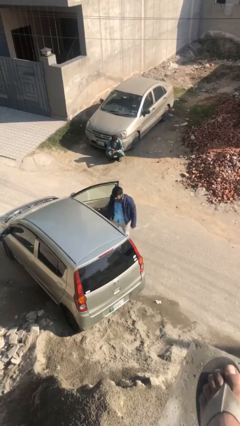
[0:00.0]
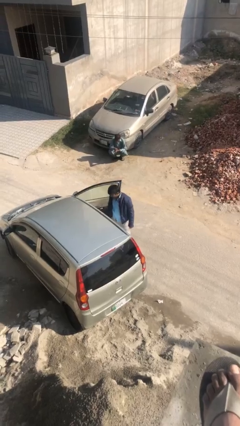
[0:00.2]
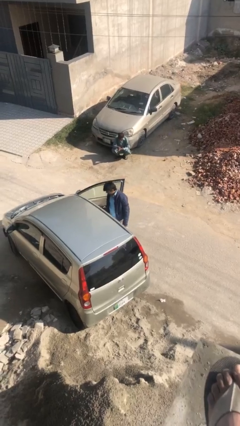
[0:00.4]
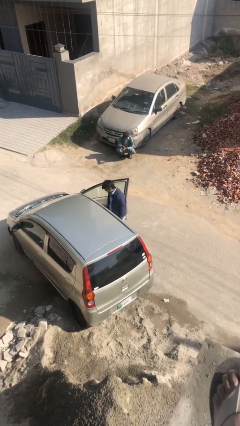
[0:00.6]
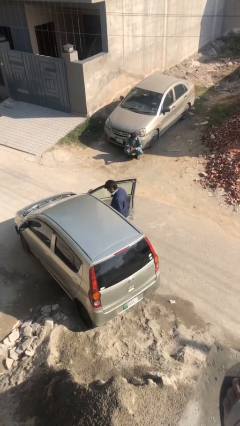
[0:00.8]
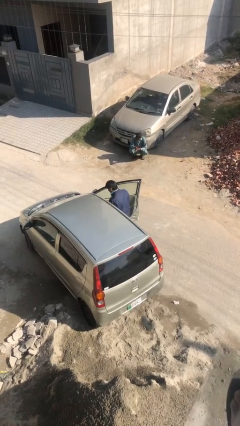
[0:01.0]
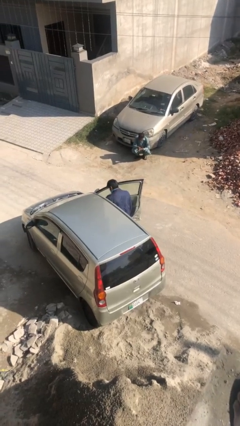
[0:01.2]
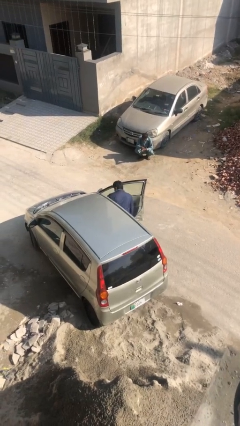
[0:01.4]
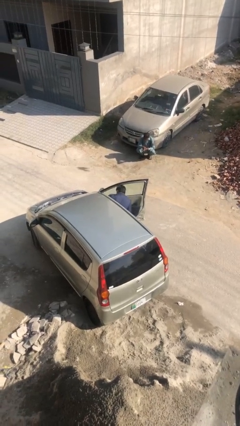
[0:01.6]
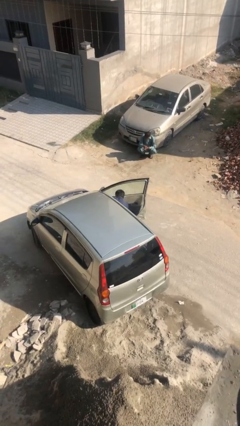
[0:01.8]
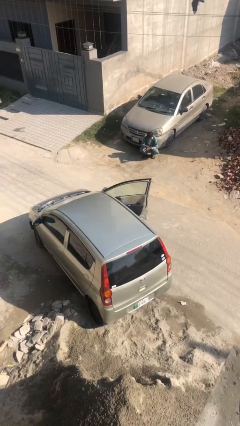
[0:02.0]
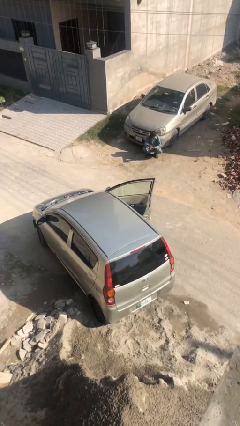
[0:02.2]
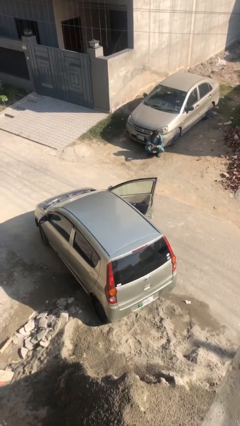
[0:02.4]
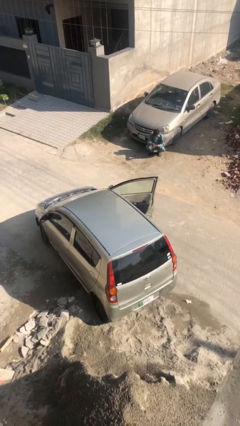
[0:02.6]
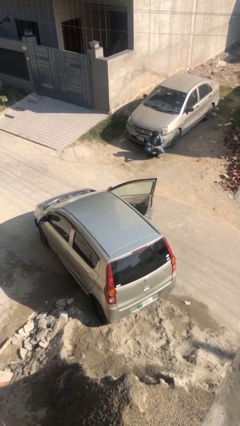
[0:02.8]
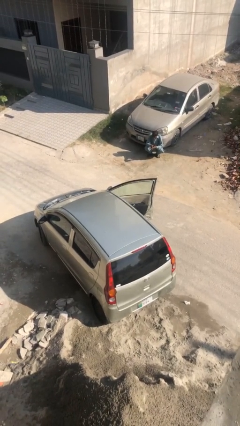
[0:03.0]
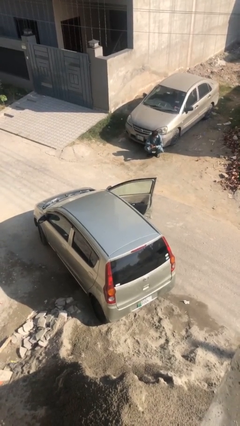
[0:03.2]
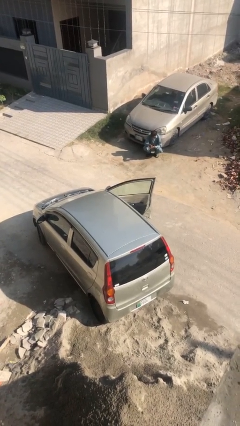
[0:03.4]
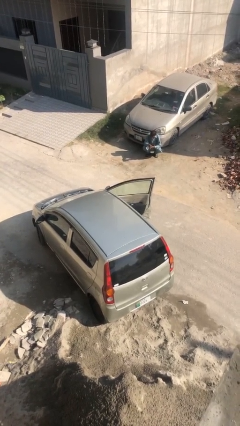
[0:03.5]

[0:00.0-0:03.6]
person enters car

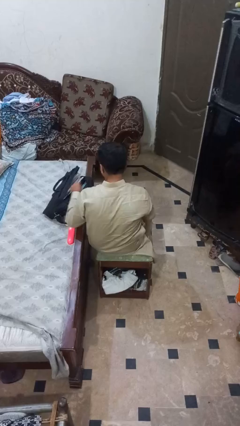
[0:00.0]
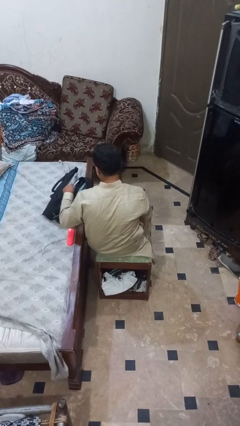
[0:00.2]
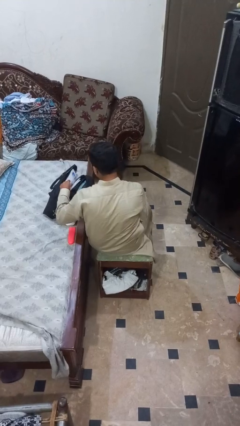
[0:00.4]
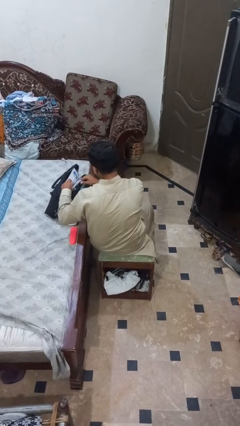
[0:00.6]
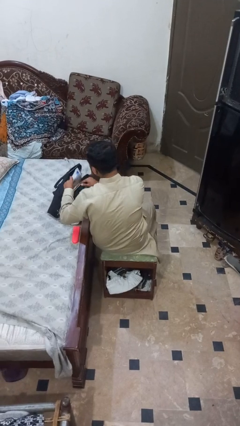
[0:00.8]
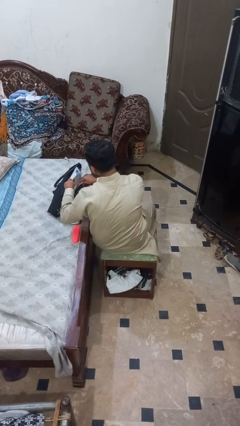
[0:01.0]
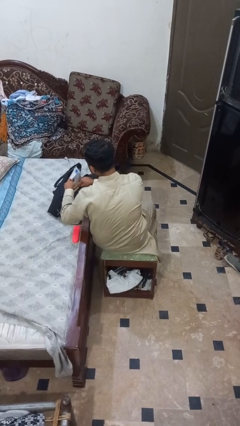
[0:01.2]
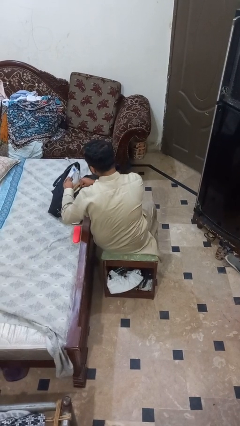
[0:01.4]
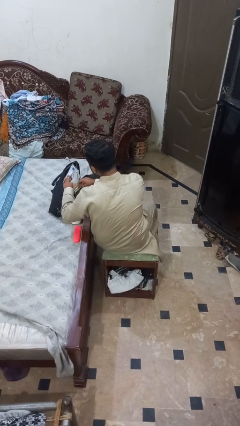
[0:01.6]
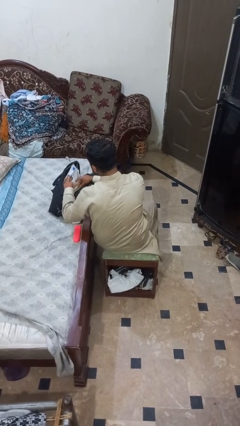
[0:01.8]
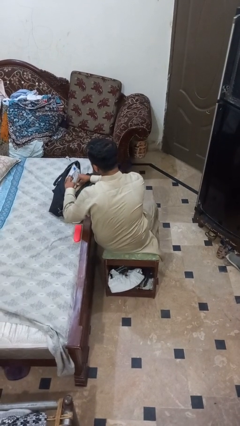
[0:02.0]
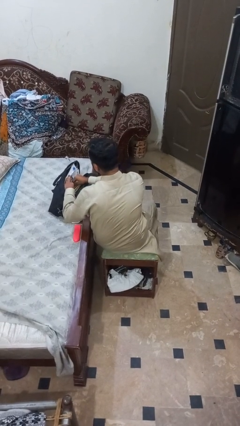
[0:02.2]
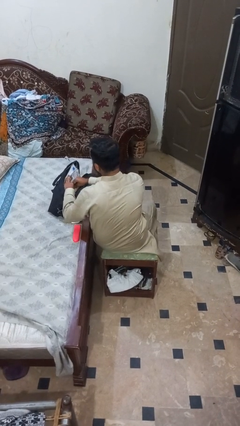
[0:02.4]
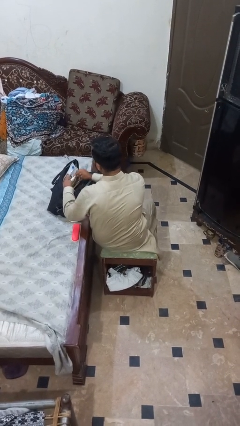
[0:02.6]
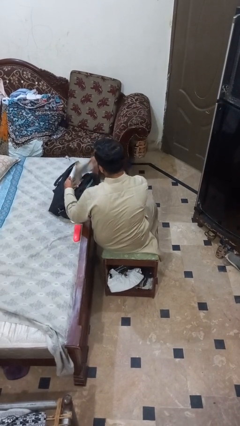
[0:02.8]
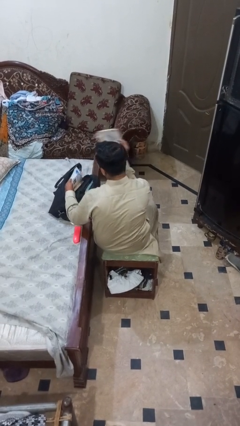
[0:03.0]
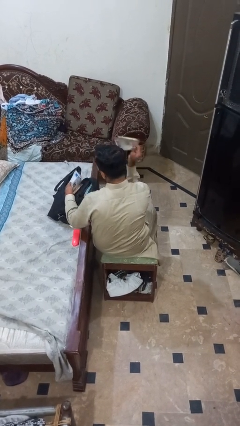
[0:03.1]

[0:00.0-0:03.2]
person searches in bag

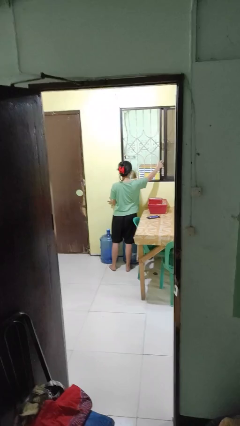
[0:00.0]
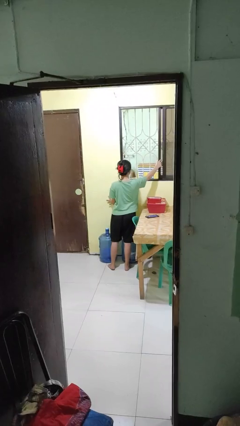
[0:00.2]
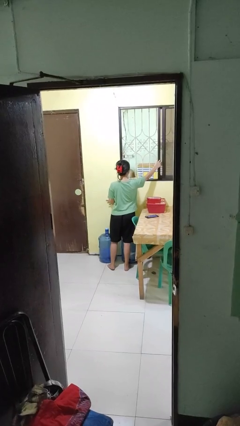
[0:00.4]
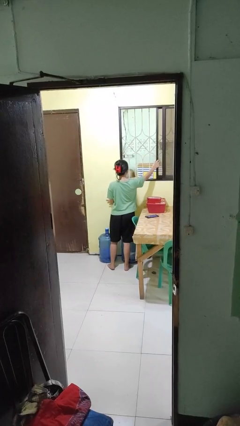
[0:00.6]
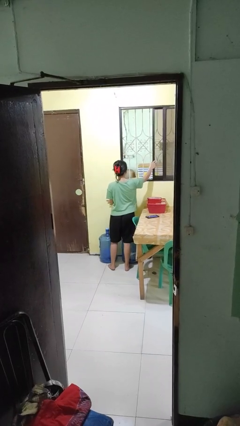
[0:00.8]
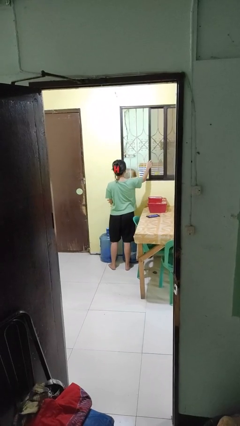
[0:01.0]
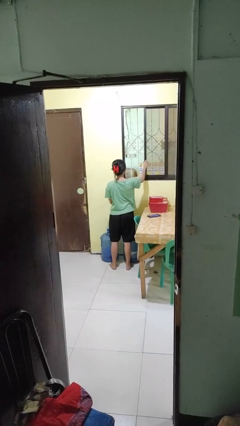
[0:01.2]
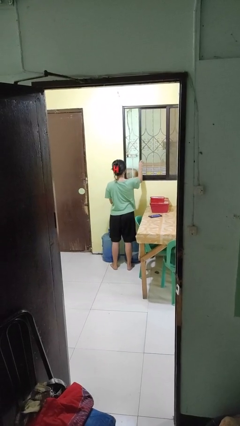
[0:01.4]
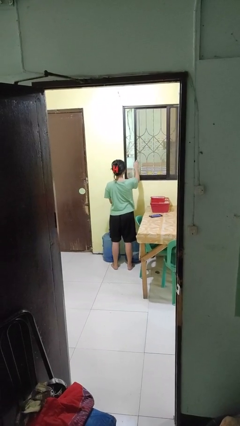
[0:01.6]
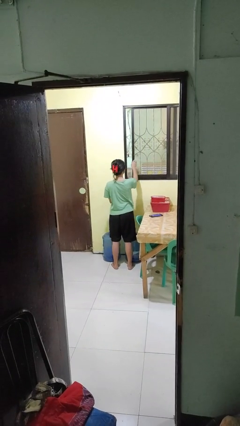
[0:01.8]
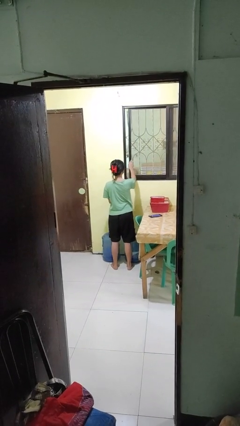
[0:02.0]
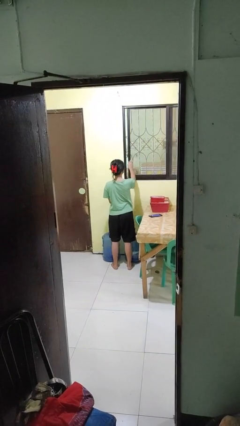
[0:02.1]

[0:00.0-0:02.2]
person closes home window

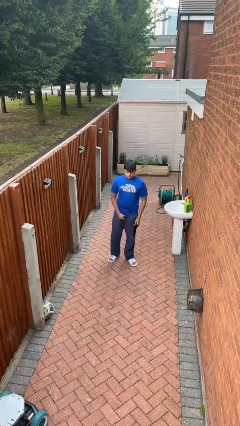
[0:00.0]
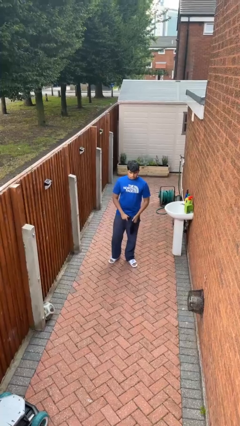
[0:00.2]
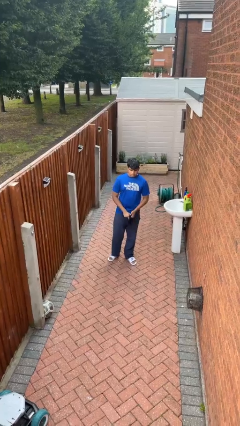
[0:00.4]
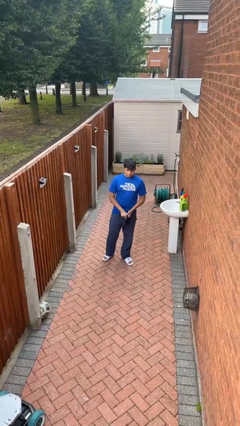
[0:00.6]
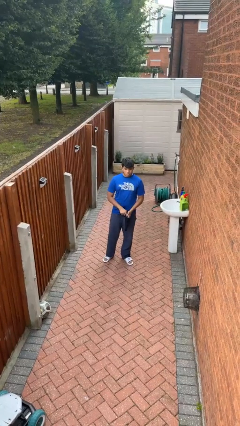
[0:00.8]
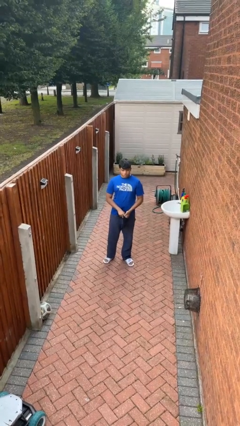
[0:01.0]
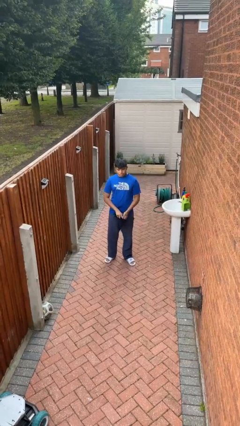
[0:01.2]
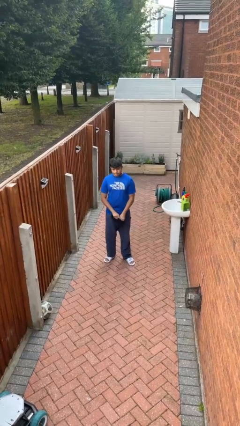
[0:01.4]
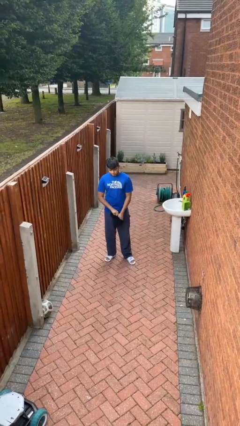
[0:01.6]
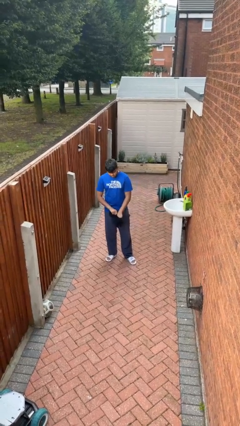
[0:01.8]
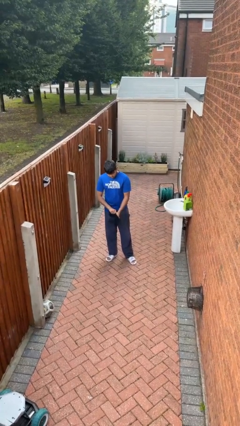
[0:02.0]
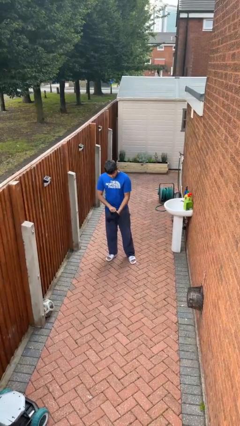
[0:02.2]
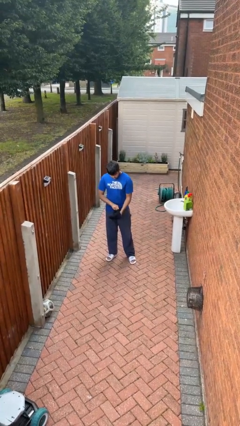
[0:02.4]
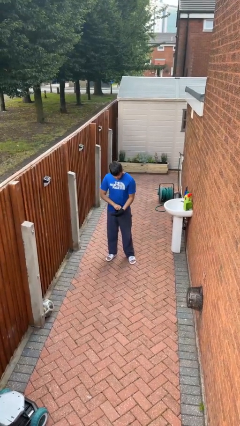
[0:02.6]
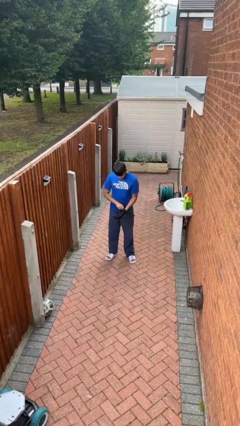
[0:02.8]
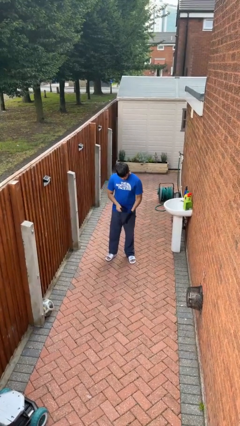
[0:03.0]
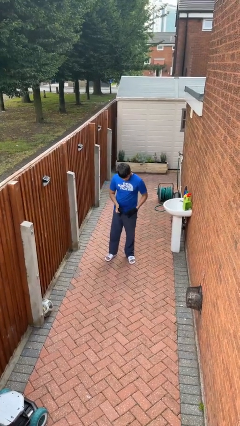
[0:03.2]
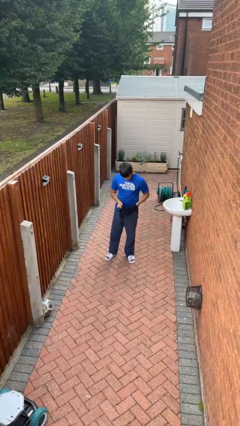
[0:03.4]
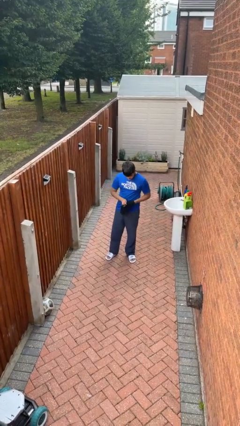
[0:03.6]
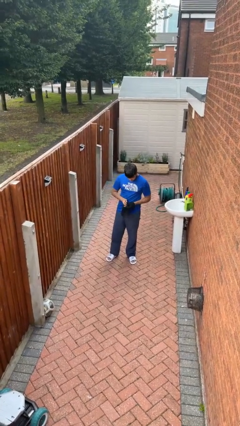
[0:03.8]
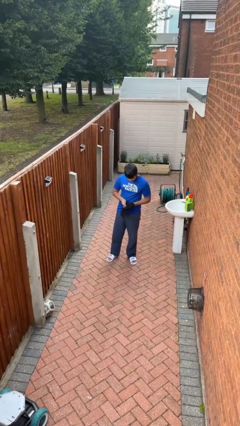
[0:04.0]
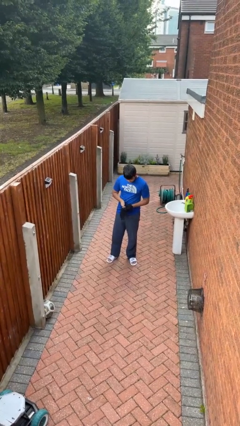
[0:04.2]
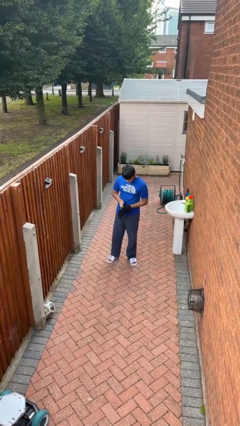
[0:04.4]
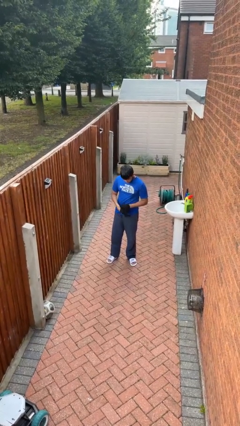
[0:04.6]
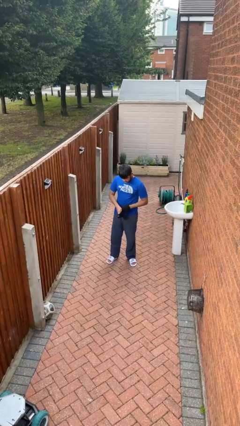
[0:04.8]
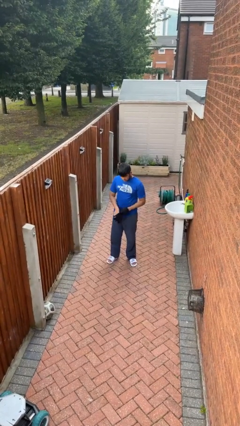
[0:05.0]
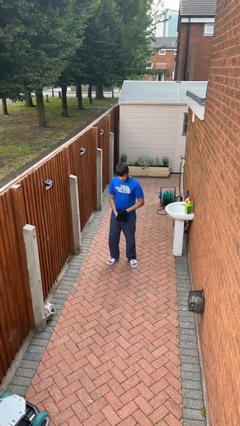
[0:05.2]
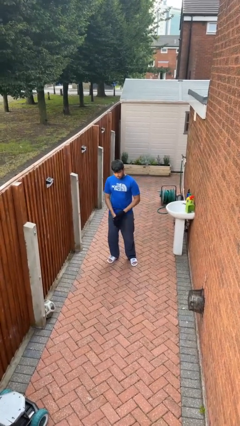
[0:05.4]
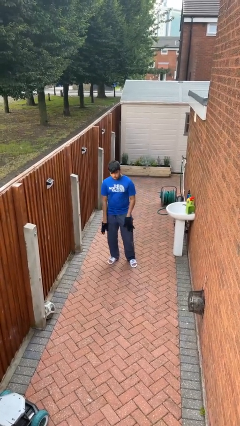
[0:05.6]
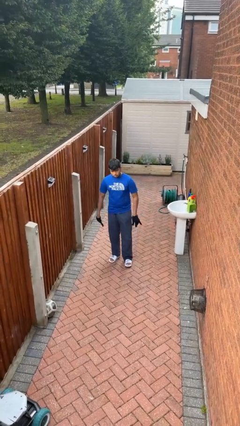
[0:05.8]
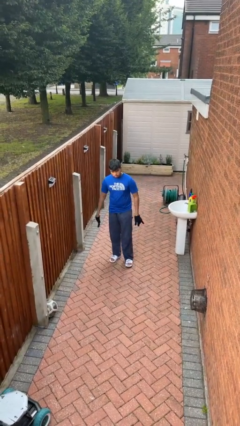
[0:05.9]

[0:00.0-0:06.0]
person puts on gloves

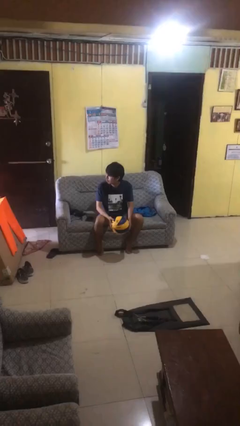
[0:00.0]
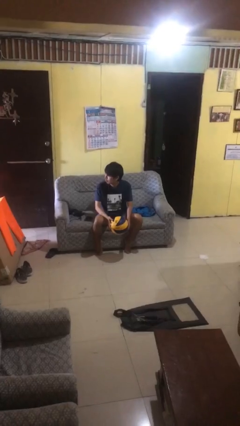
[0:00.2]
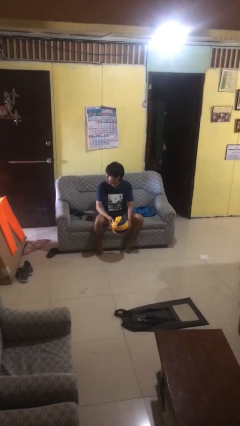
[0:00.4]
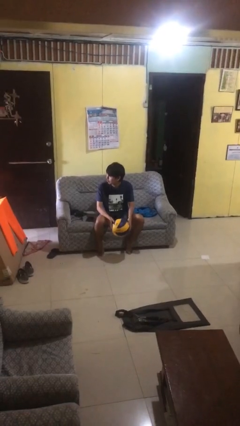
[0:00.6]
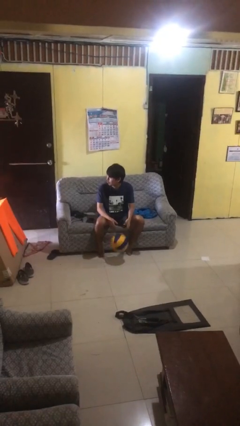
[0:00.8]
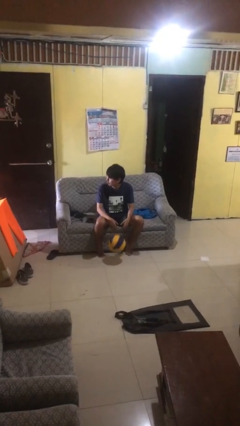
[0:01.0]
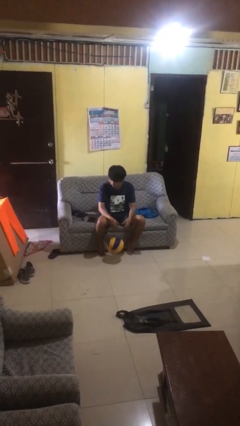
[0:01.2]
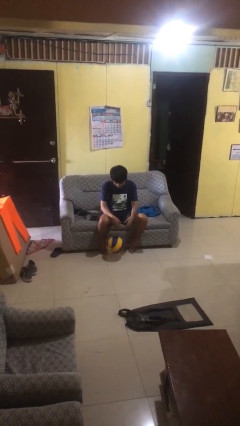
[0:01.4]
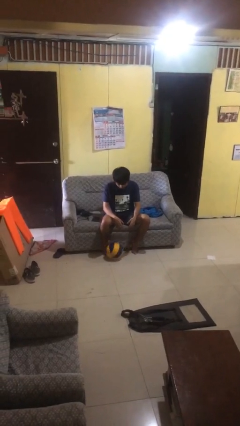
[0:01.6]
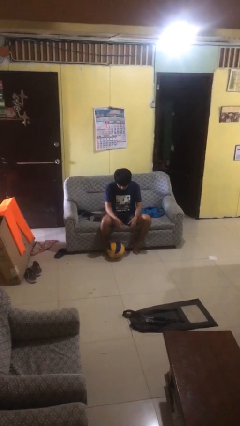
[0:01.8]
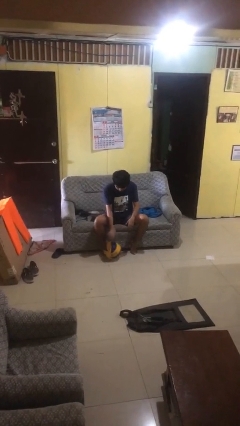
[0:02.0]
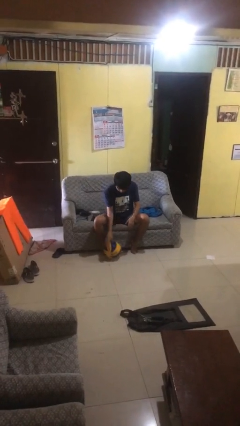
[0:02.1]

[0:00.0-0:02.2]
person drops object

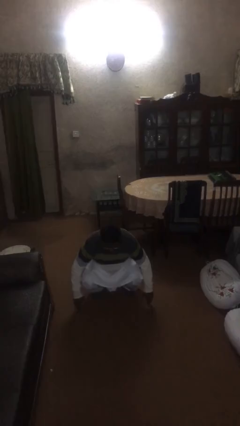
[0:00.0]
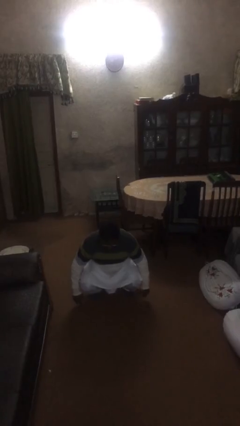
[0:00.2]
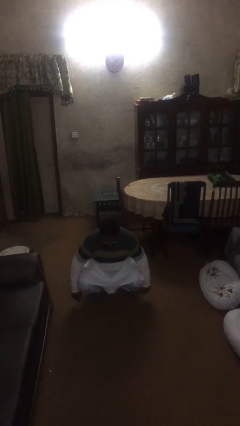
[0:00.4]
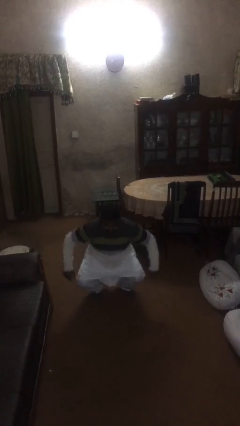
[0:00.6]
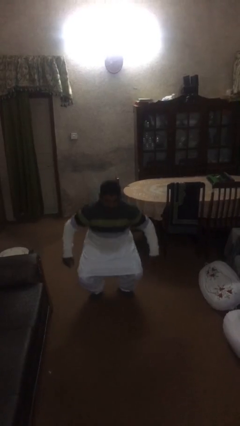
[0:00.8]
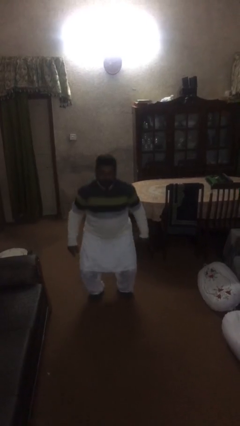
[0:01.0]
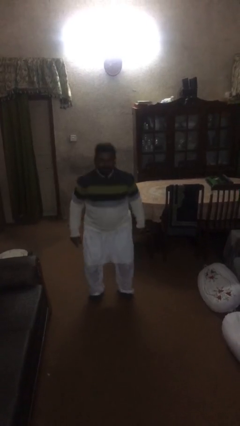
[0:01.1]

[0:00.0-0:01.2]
person stands up
